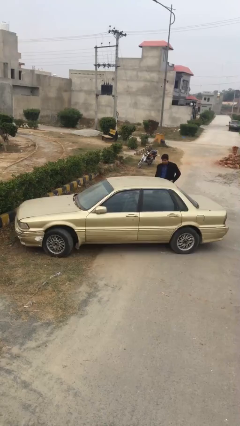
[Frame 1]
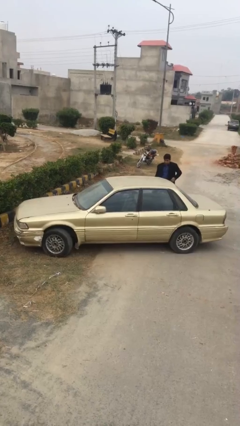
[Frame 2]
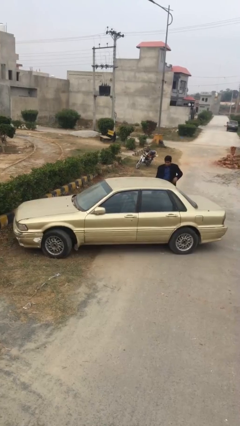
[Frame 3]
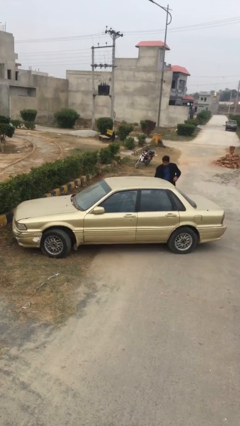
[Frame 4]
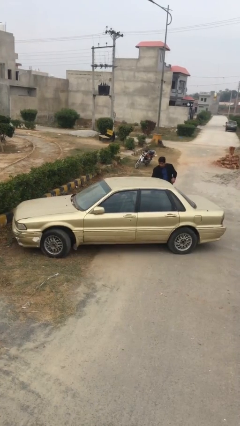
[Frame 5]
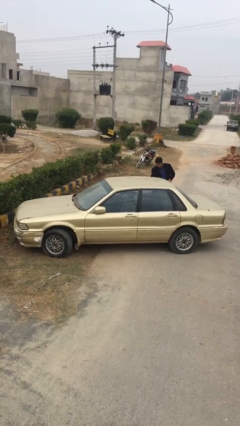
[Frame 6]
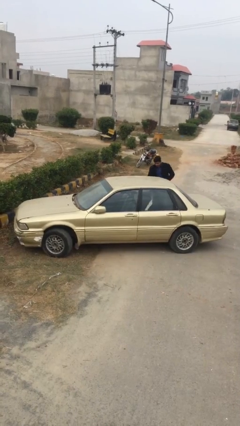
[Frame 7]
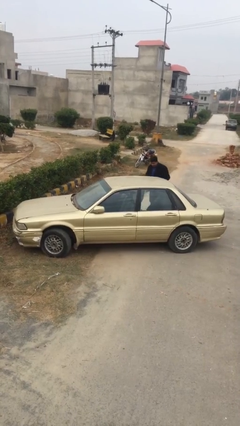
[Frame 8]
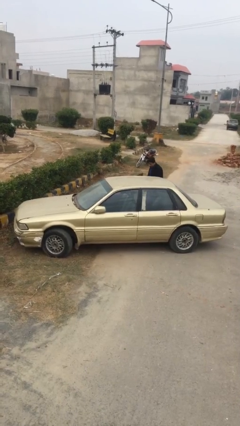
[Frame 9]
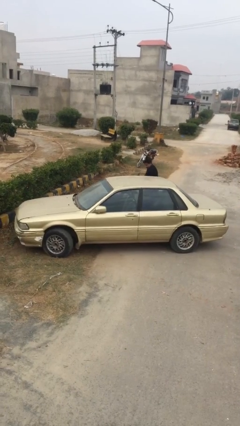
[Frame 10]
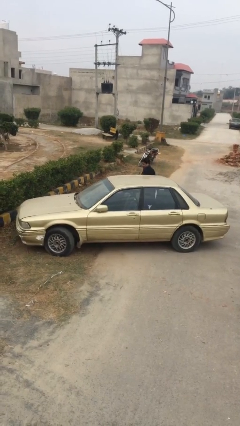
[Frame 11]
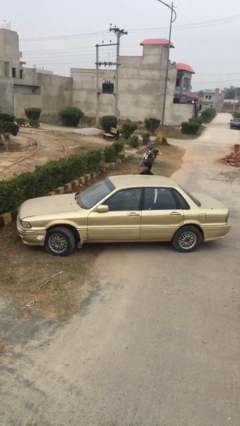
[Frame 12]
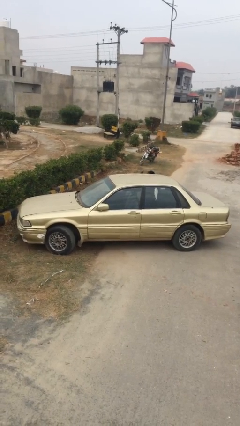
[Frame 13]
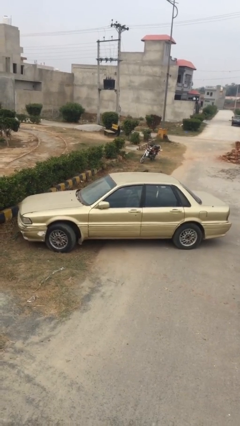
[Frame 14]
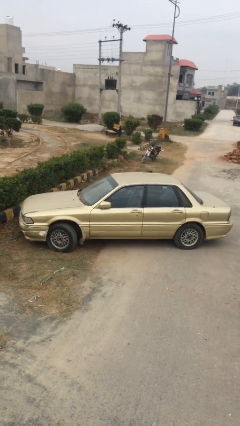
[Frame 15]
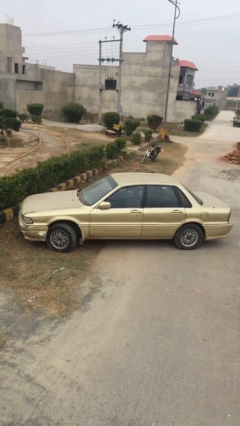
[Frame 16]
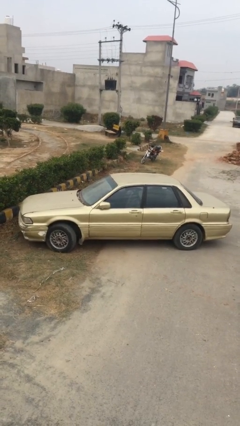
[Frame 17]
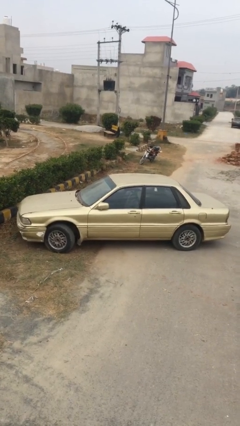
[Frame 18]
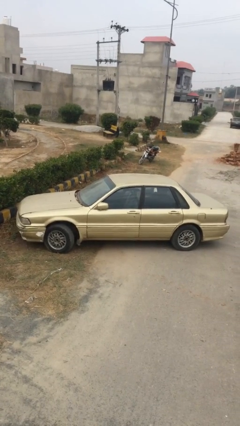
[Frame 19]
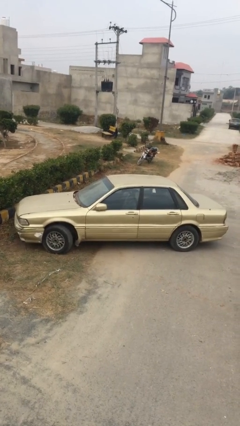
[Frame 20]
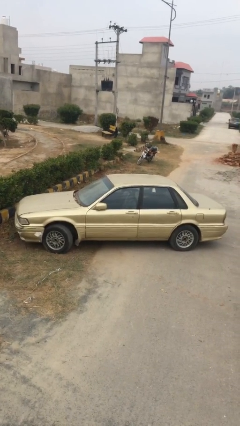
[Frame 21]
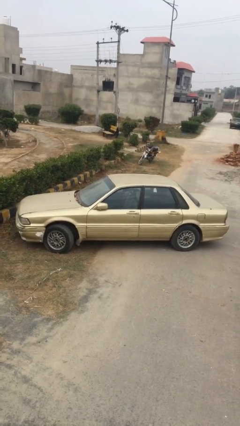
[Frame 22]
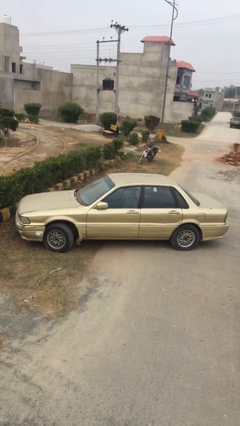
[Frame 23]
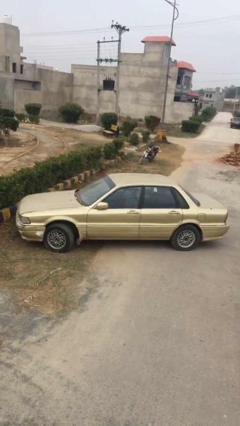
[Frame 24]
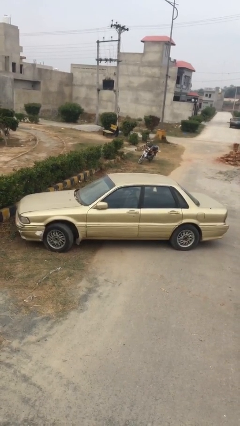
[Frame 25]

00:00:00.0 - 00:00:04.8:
car picks up person

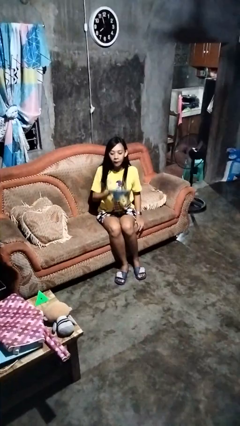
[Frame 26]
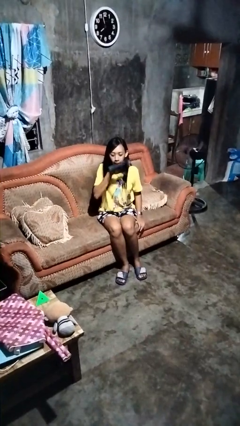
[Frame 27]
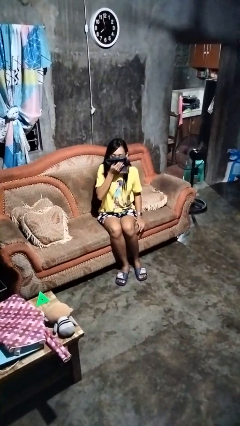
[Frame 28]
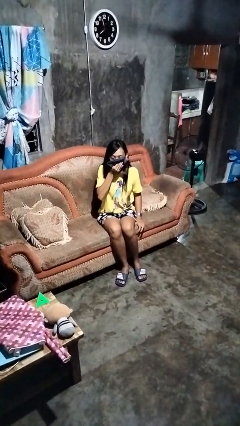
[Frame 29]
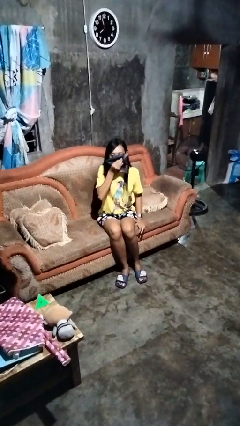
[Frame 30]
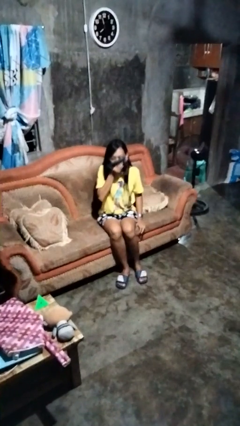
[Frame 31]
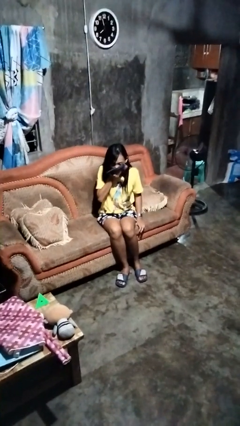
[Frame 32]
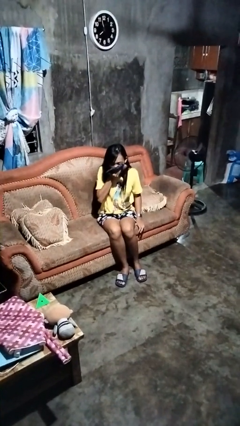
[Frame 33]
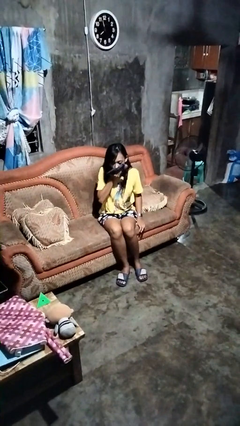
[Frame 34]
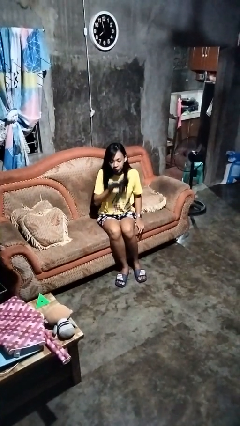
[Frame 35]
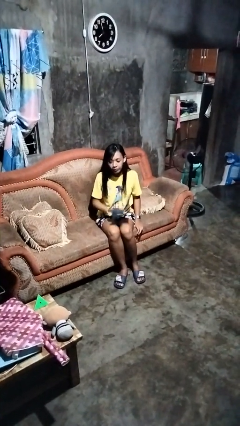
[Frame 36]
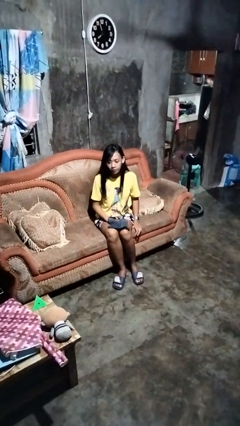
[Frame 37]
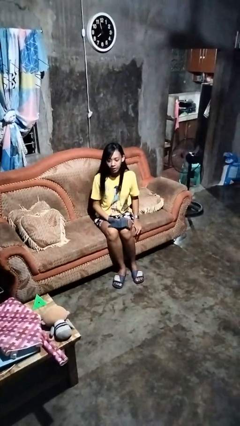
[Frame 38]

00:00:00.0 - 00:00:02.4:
person blows nose

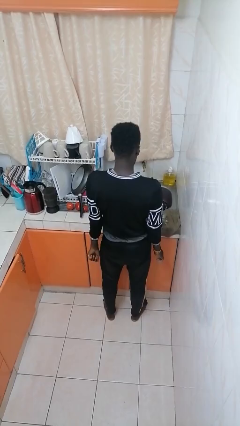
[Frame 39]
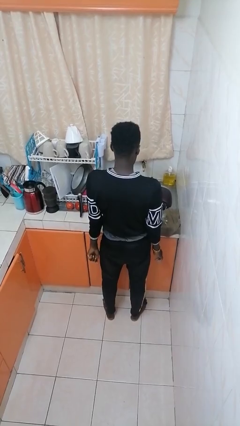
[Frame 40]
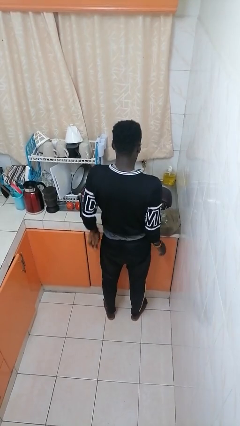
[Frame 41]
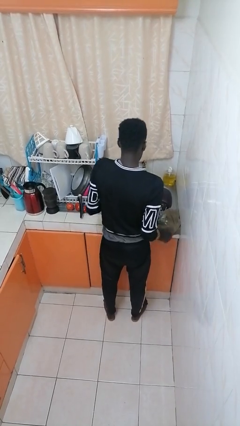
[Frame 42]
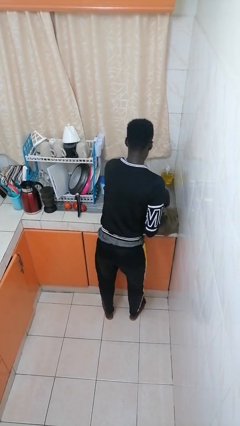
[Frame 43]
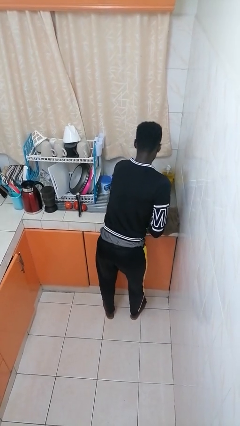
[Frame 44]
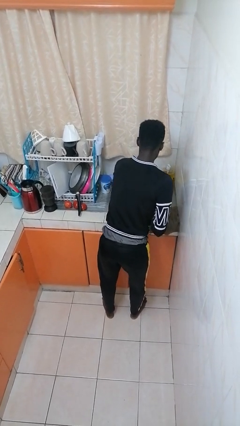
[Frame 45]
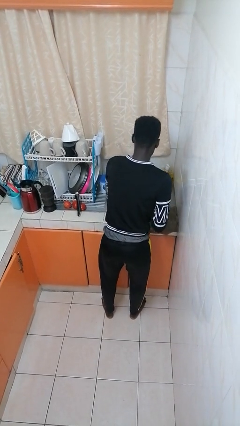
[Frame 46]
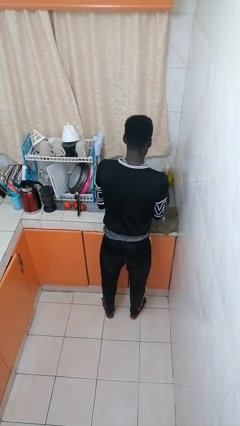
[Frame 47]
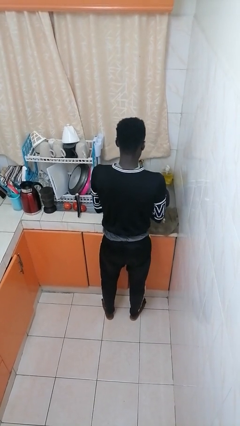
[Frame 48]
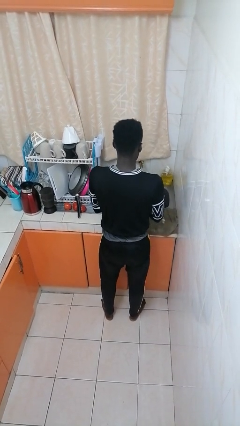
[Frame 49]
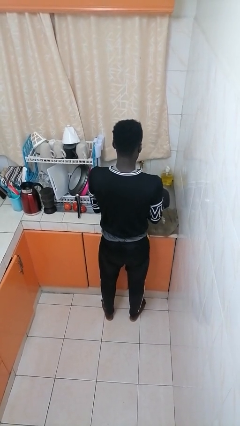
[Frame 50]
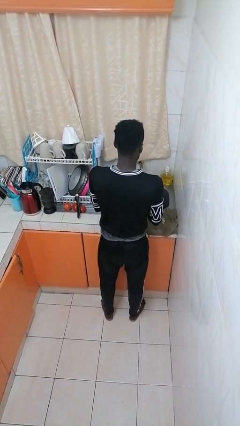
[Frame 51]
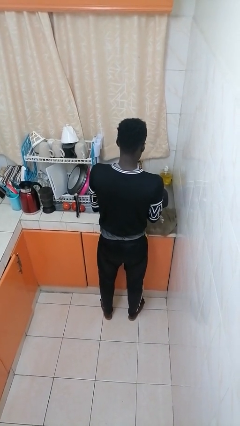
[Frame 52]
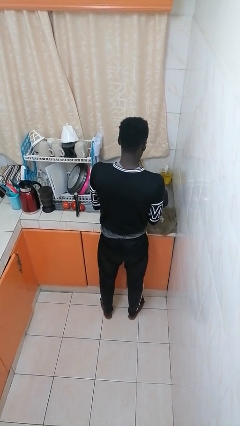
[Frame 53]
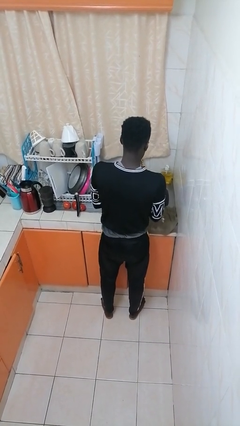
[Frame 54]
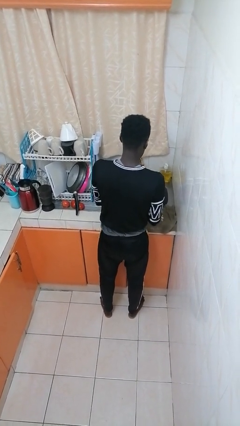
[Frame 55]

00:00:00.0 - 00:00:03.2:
person washes dish

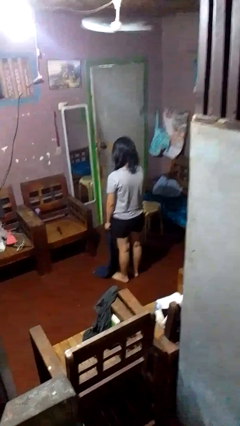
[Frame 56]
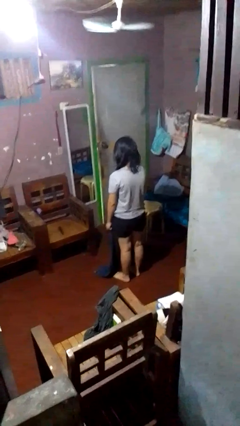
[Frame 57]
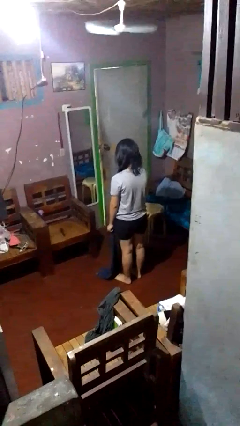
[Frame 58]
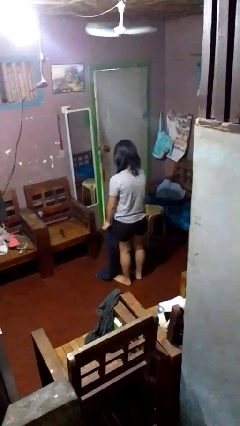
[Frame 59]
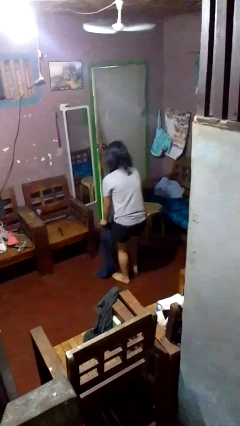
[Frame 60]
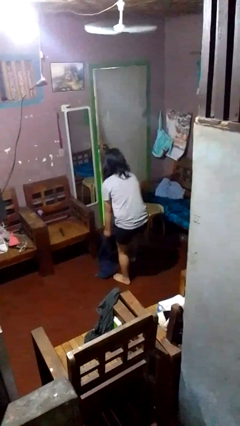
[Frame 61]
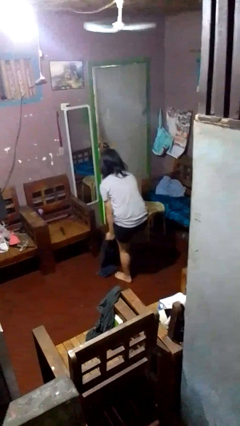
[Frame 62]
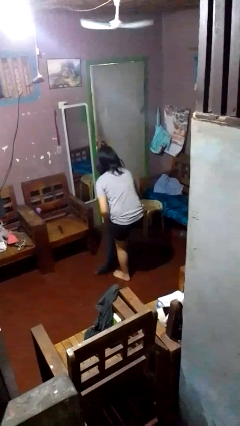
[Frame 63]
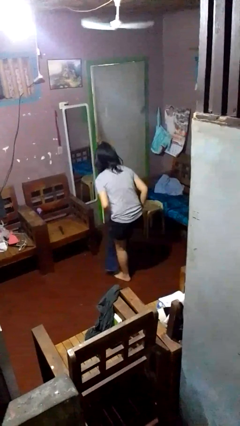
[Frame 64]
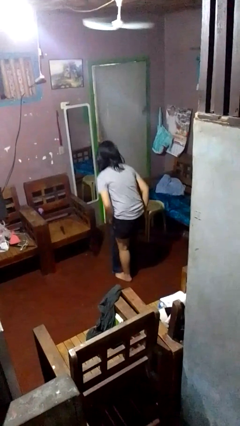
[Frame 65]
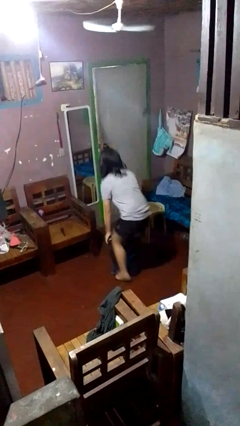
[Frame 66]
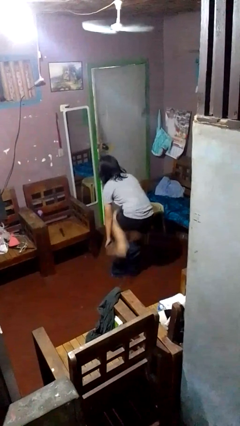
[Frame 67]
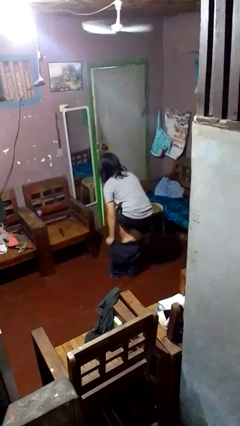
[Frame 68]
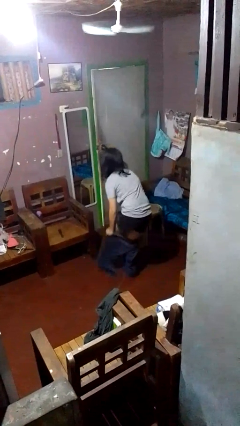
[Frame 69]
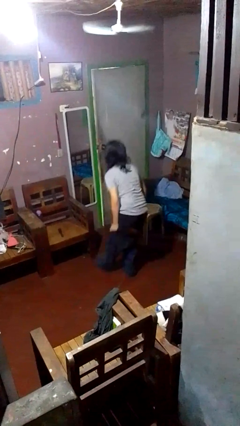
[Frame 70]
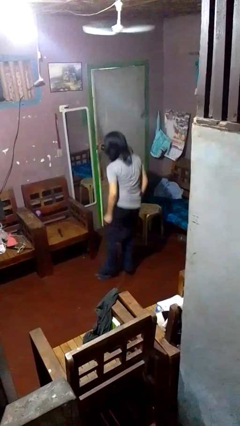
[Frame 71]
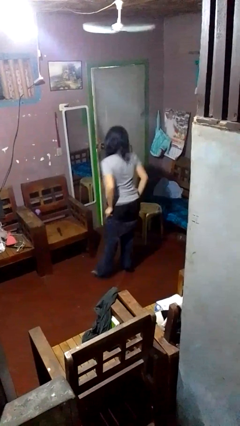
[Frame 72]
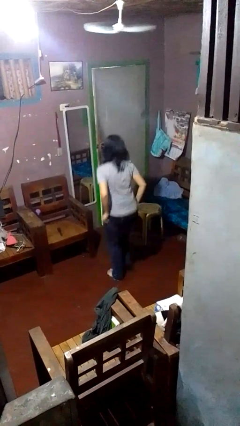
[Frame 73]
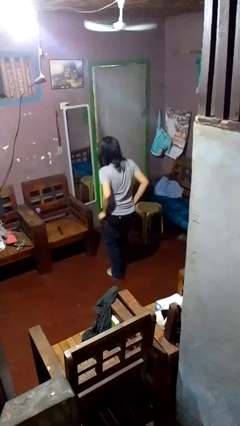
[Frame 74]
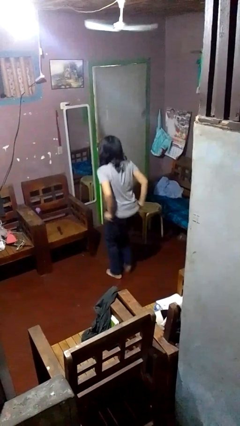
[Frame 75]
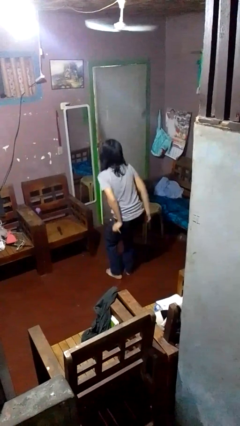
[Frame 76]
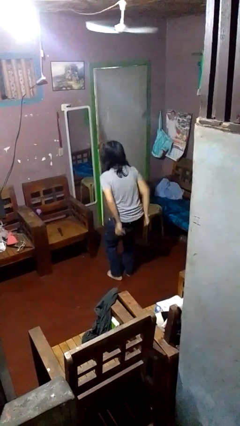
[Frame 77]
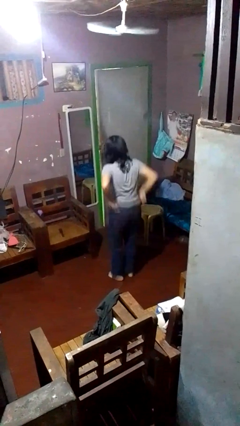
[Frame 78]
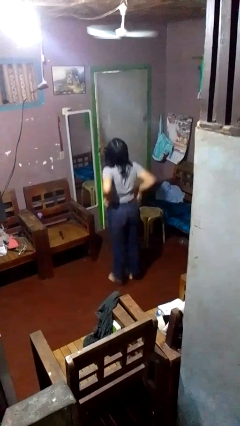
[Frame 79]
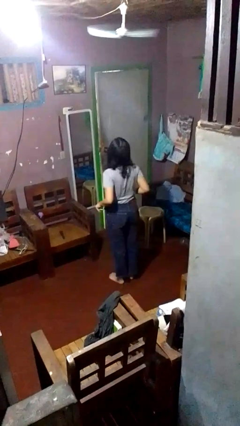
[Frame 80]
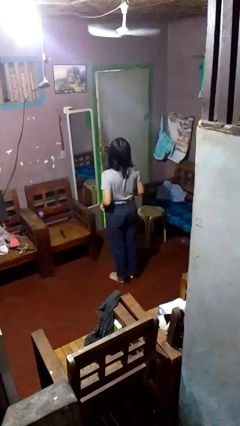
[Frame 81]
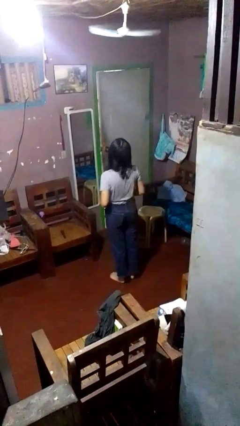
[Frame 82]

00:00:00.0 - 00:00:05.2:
person puts on pants

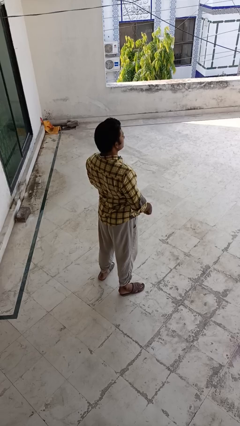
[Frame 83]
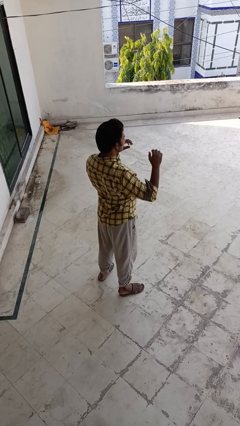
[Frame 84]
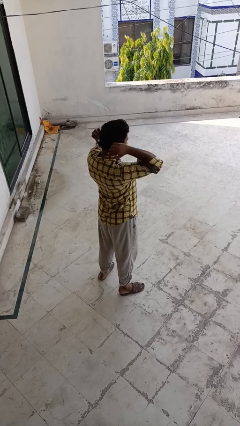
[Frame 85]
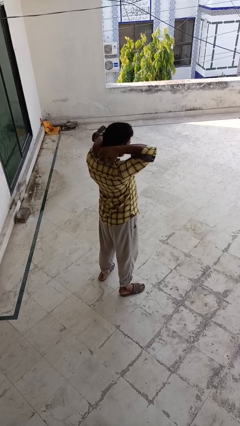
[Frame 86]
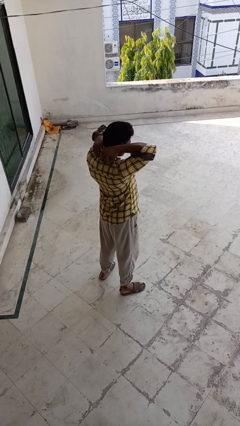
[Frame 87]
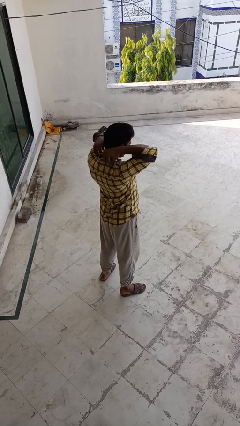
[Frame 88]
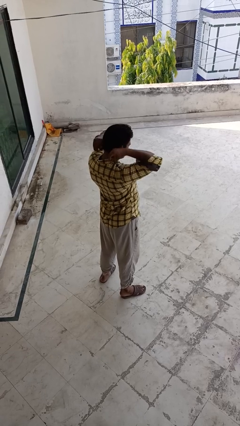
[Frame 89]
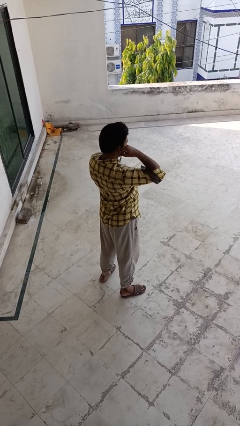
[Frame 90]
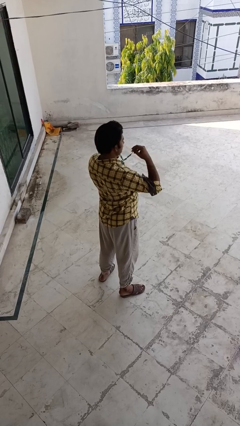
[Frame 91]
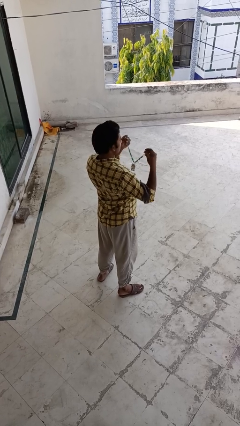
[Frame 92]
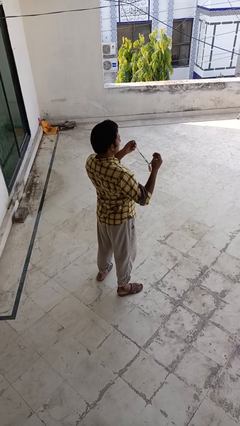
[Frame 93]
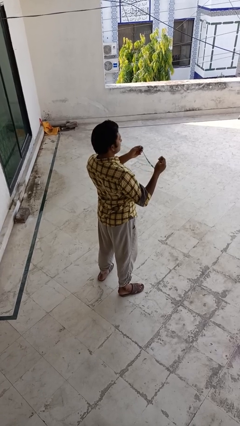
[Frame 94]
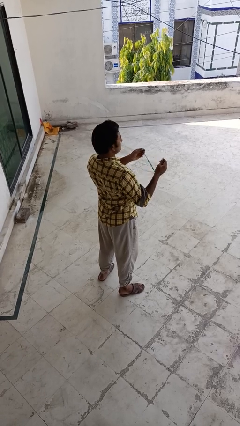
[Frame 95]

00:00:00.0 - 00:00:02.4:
person takes off necklace
